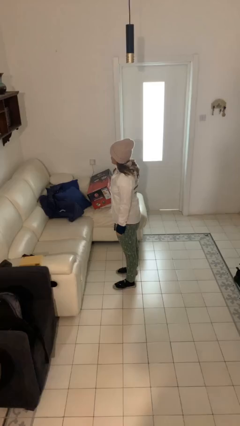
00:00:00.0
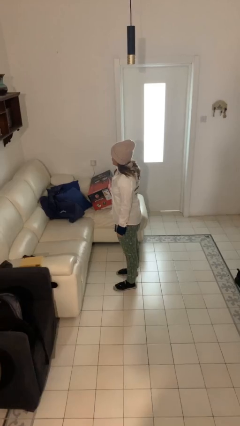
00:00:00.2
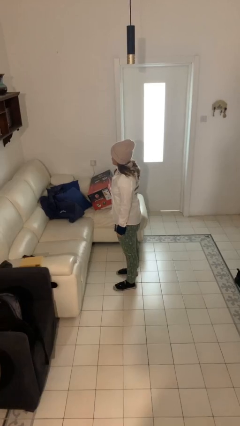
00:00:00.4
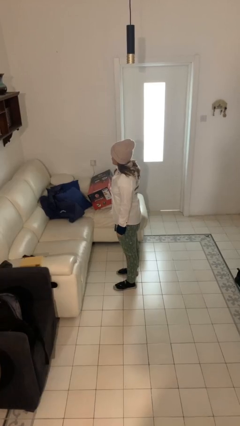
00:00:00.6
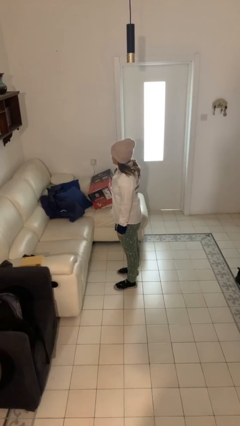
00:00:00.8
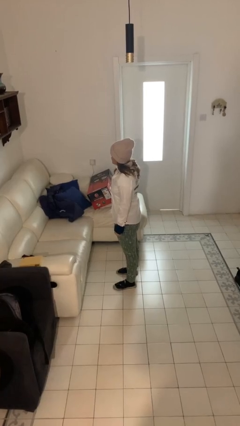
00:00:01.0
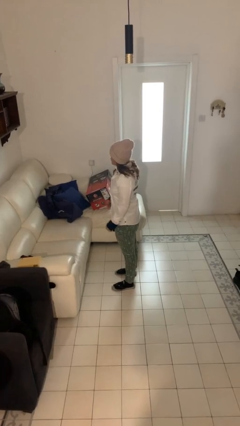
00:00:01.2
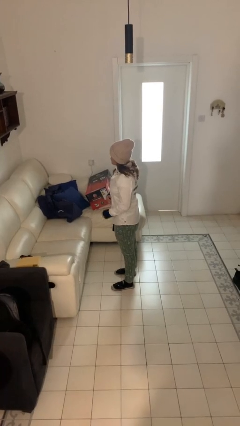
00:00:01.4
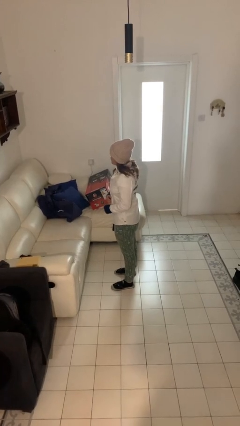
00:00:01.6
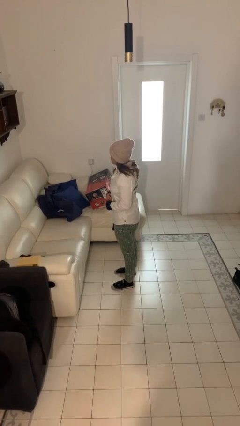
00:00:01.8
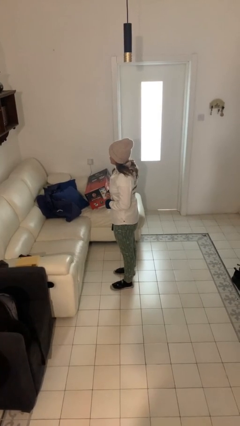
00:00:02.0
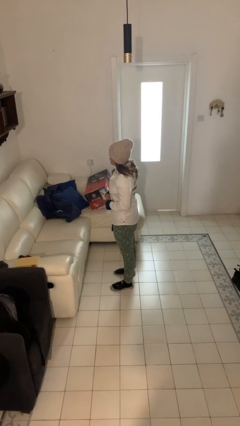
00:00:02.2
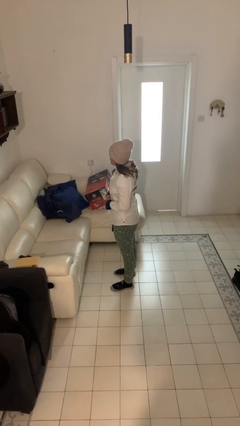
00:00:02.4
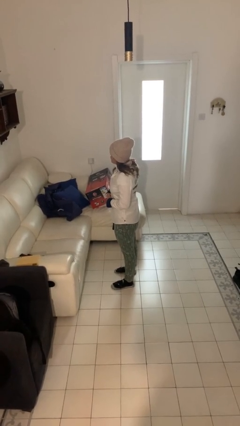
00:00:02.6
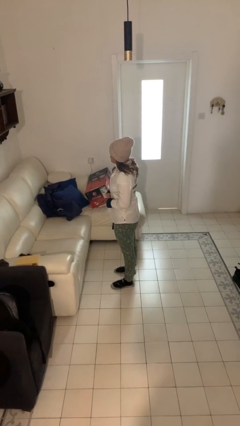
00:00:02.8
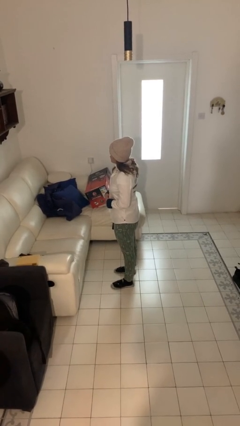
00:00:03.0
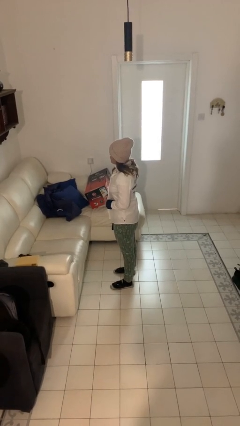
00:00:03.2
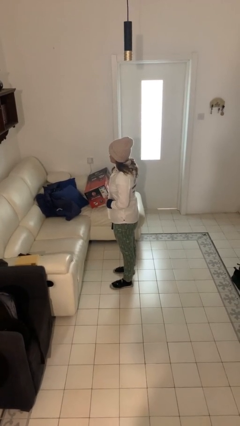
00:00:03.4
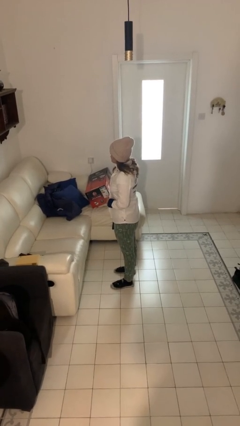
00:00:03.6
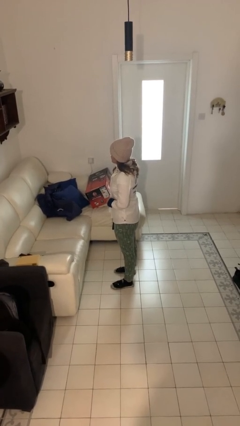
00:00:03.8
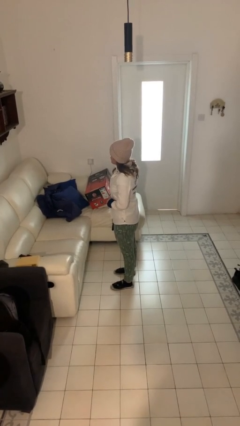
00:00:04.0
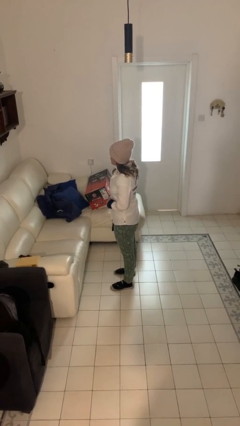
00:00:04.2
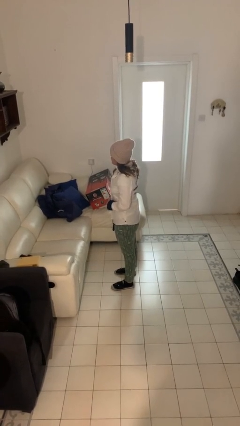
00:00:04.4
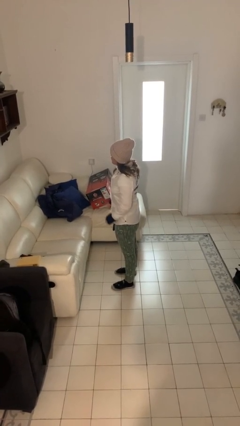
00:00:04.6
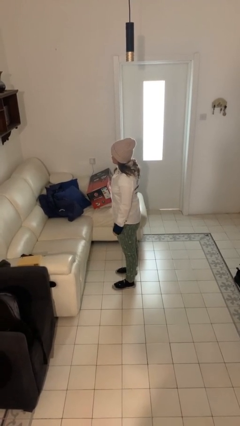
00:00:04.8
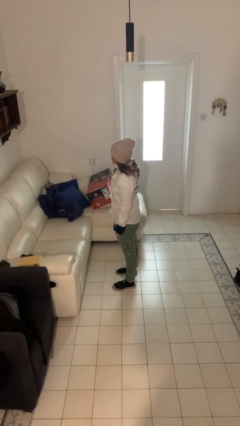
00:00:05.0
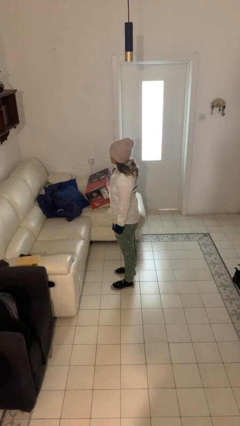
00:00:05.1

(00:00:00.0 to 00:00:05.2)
person unbuttons shirt

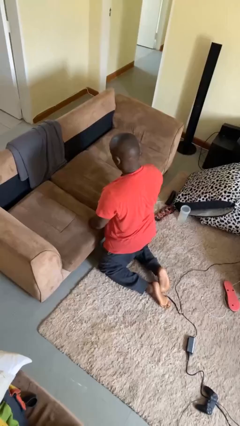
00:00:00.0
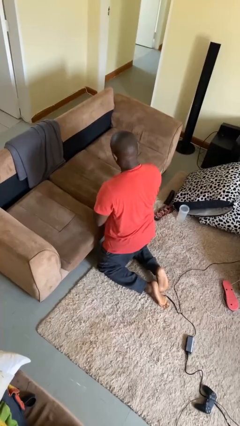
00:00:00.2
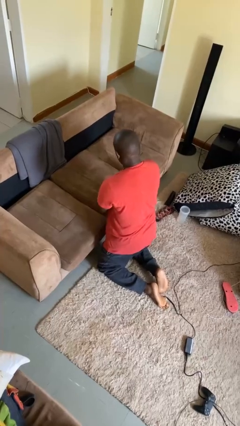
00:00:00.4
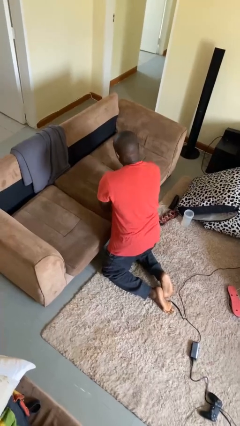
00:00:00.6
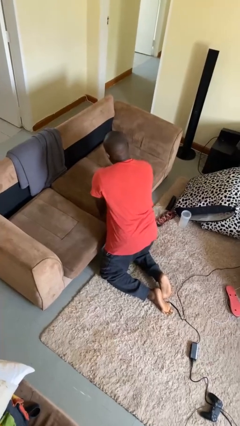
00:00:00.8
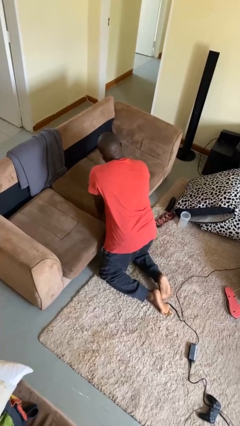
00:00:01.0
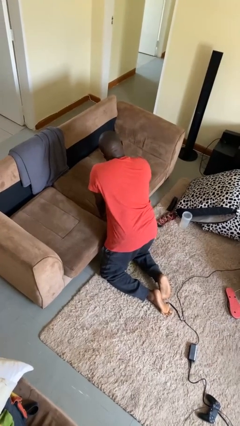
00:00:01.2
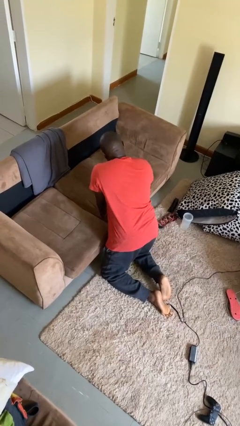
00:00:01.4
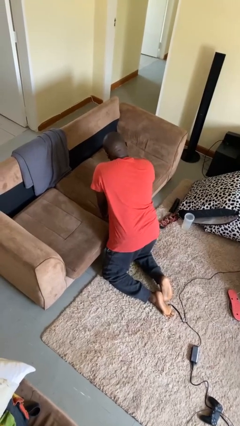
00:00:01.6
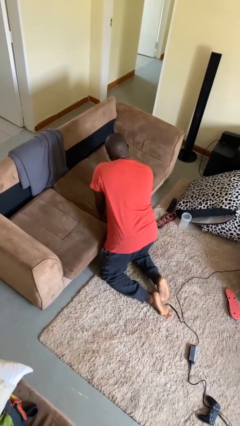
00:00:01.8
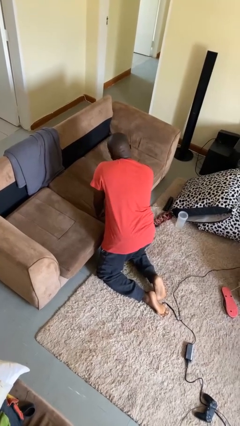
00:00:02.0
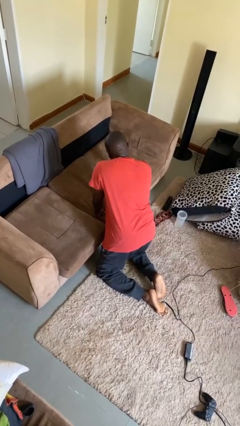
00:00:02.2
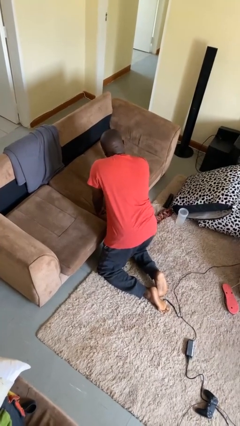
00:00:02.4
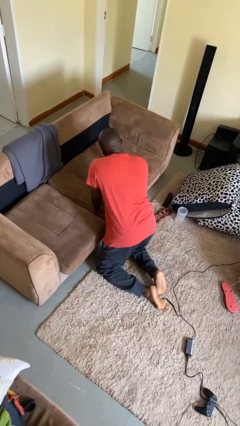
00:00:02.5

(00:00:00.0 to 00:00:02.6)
person searches in couch

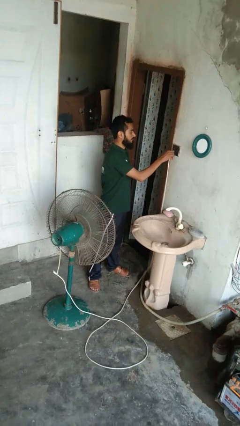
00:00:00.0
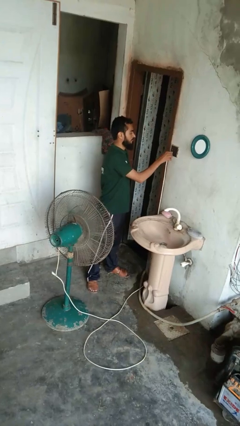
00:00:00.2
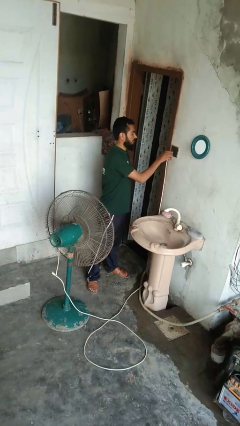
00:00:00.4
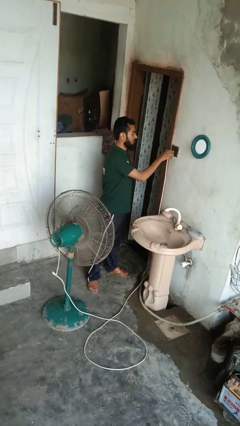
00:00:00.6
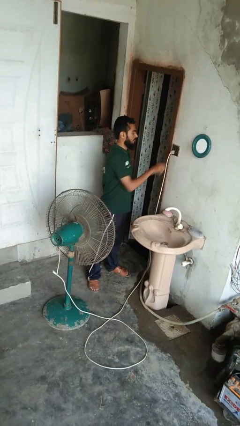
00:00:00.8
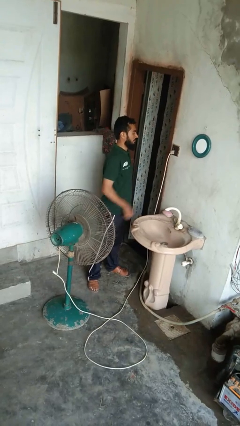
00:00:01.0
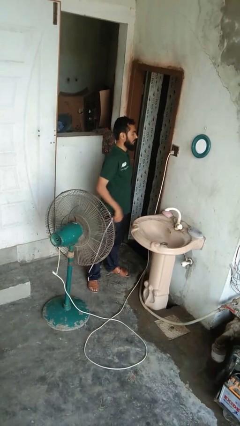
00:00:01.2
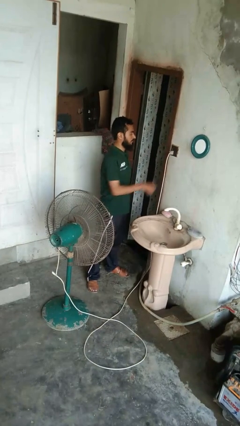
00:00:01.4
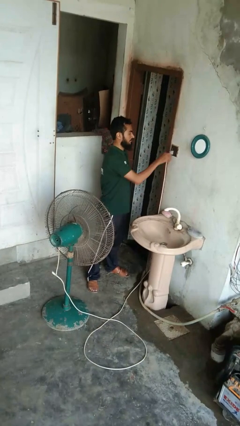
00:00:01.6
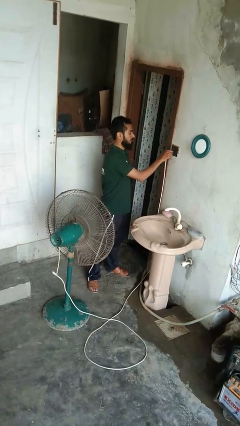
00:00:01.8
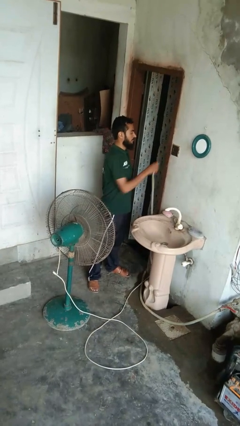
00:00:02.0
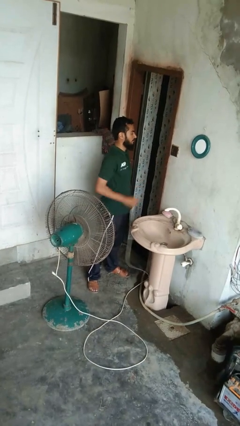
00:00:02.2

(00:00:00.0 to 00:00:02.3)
person turns off fan

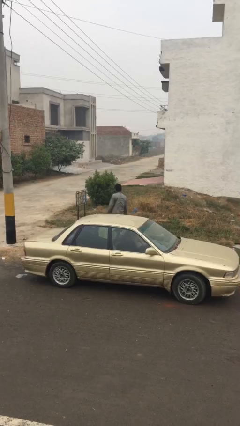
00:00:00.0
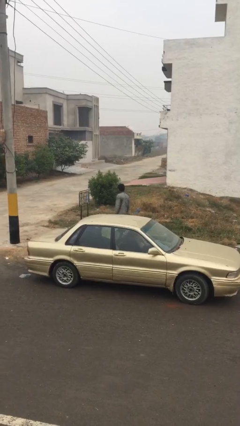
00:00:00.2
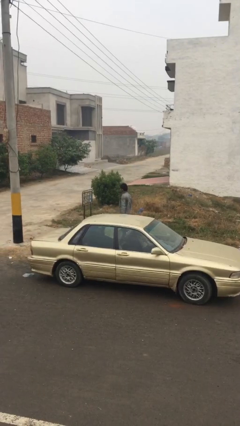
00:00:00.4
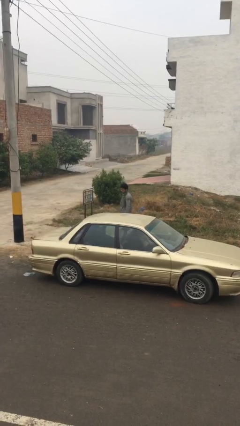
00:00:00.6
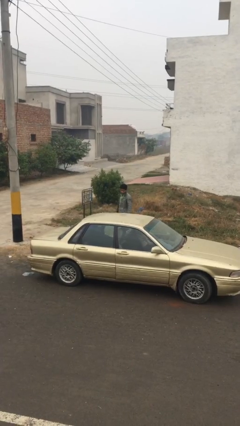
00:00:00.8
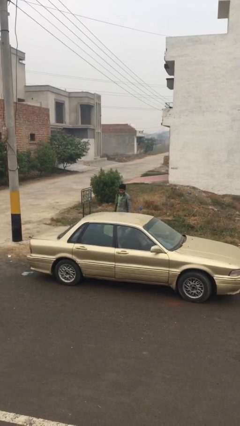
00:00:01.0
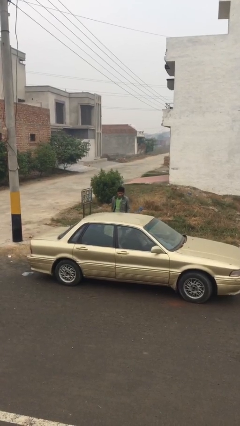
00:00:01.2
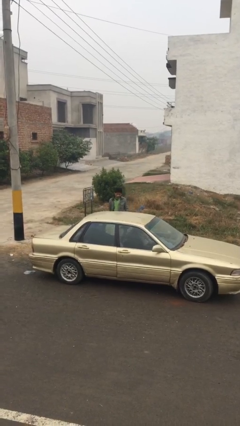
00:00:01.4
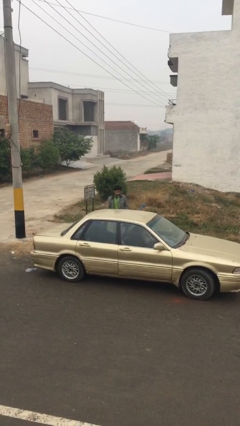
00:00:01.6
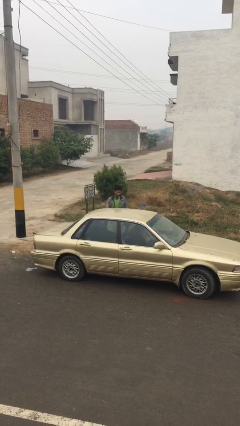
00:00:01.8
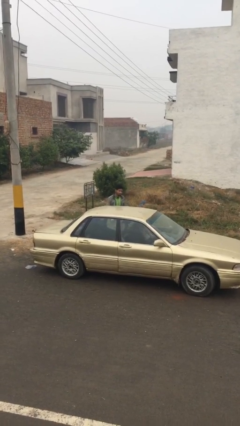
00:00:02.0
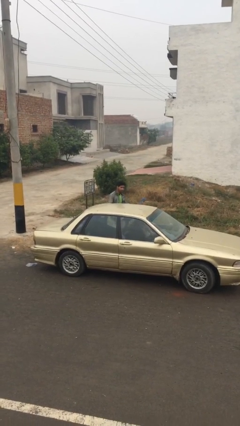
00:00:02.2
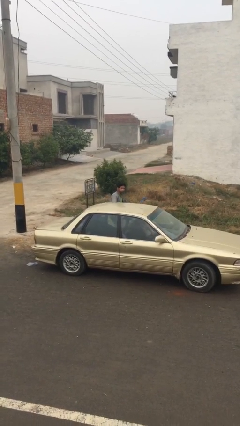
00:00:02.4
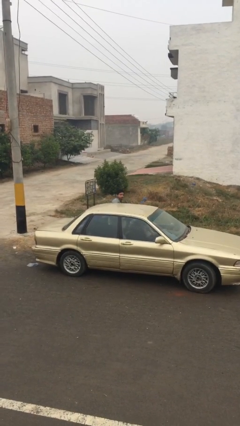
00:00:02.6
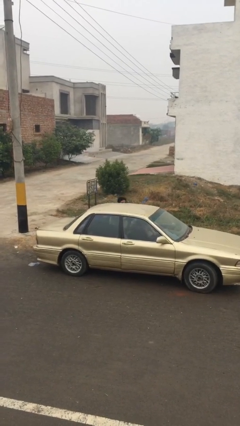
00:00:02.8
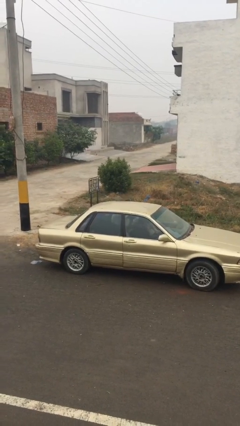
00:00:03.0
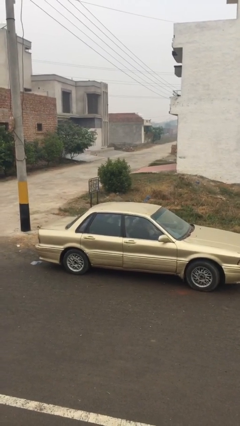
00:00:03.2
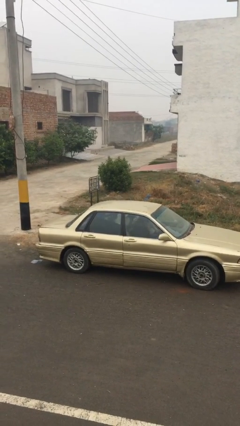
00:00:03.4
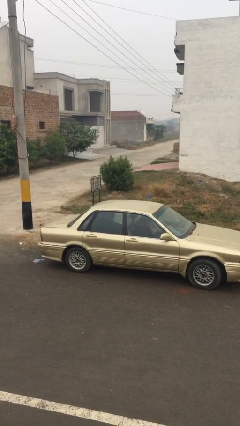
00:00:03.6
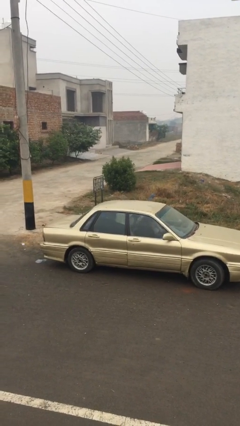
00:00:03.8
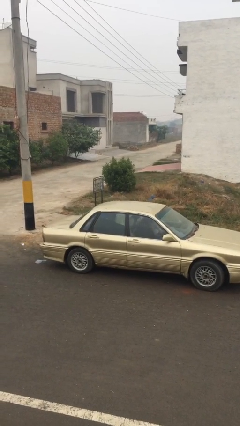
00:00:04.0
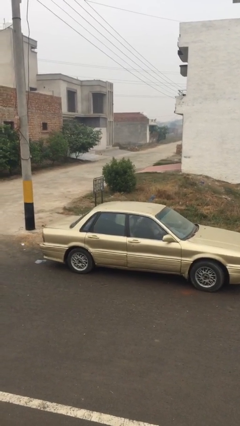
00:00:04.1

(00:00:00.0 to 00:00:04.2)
person enters car

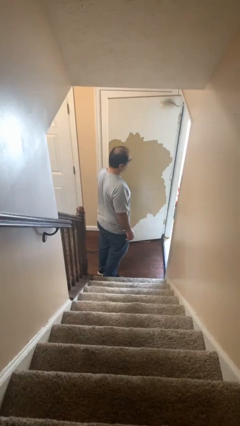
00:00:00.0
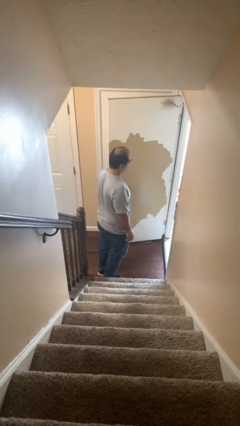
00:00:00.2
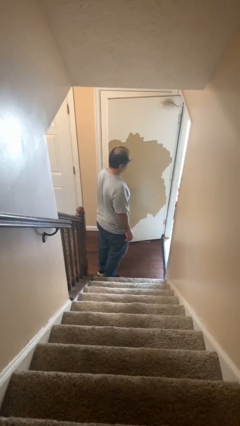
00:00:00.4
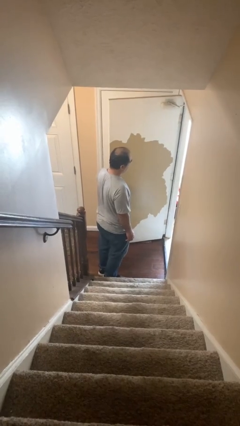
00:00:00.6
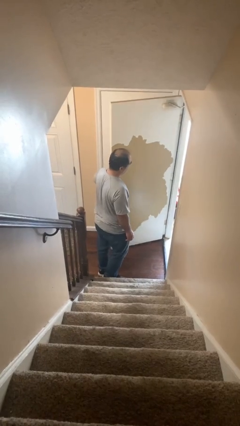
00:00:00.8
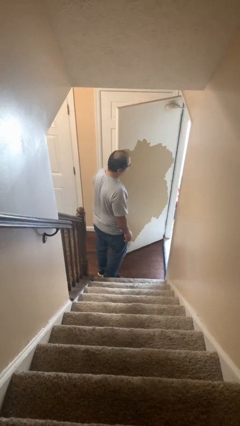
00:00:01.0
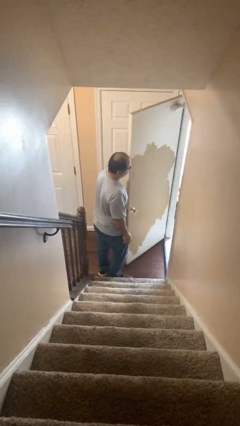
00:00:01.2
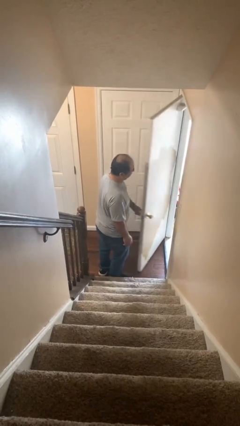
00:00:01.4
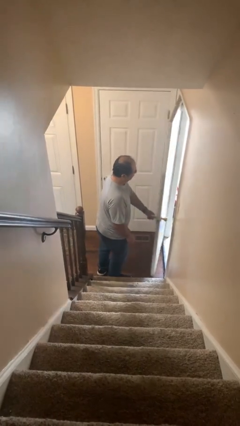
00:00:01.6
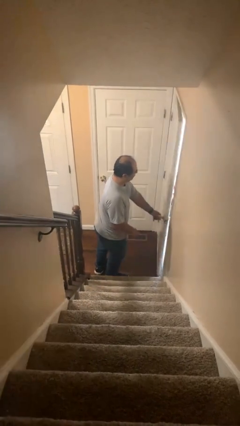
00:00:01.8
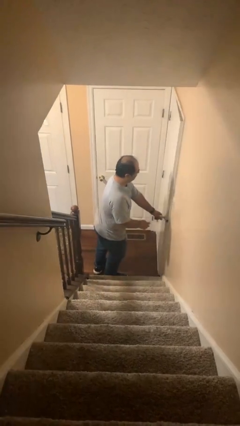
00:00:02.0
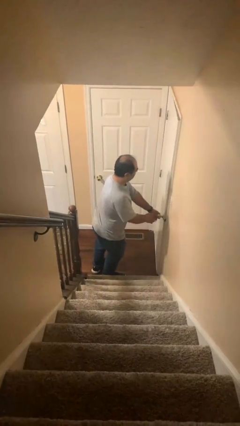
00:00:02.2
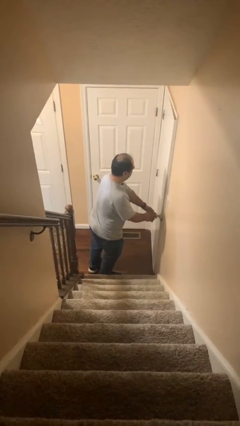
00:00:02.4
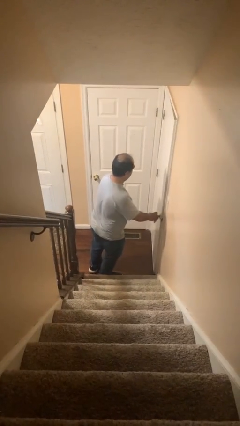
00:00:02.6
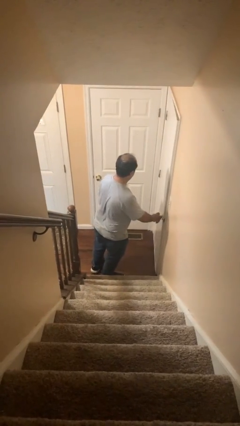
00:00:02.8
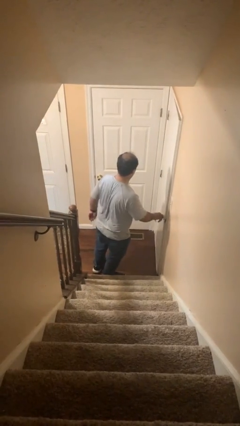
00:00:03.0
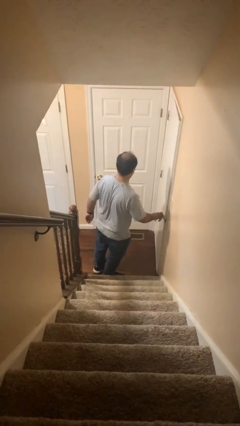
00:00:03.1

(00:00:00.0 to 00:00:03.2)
person closes facility door

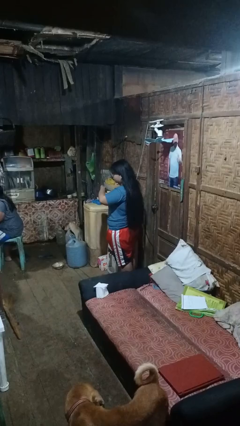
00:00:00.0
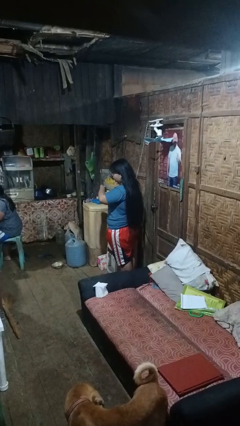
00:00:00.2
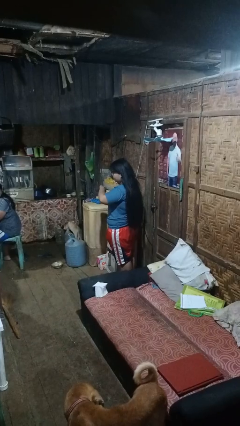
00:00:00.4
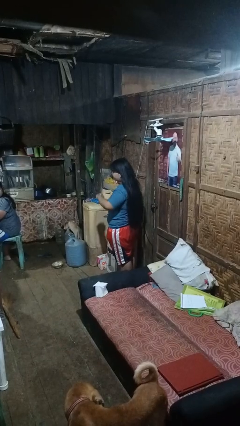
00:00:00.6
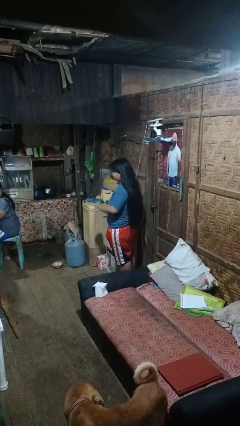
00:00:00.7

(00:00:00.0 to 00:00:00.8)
person looks at wristwatch
